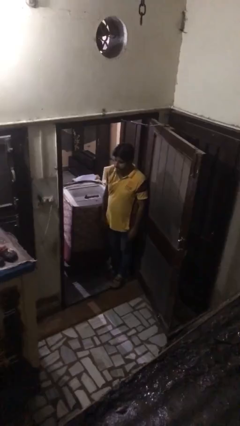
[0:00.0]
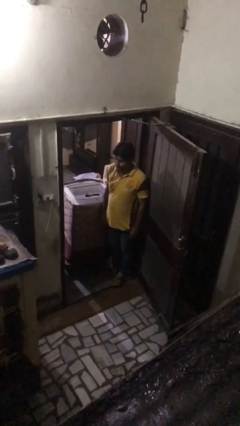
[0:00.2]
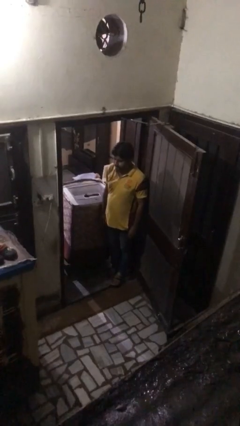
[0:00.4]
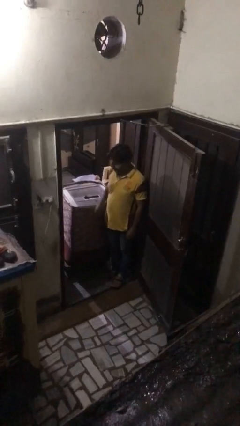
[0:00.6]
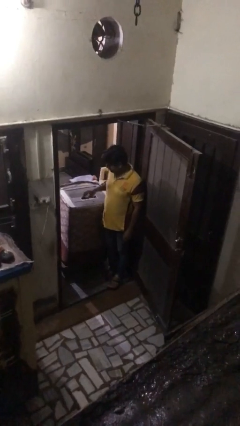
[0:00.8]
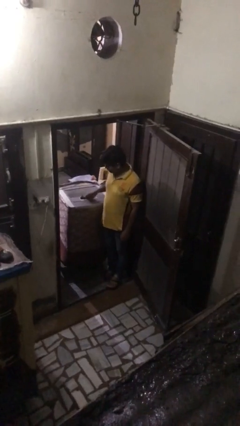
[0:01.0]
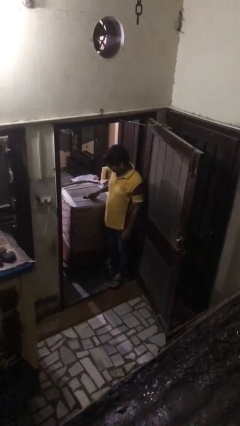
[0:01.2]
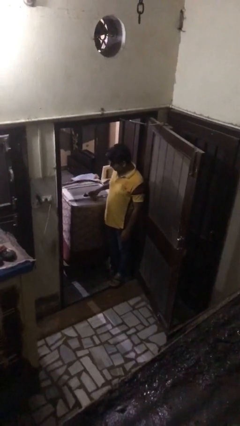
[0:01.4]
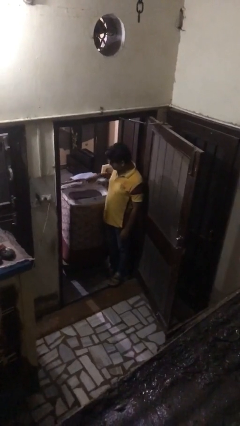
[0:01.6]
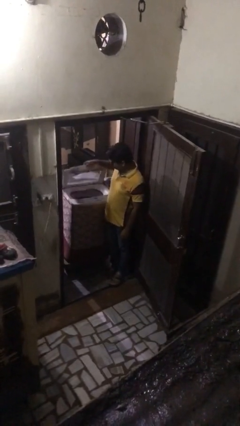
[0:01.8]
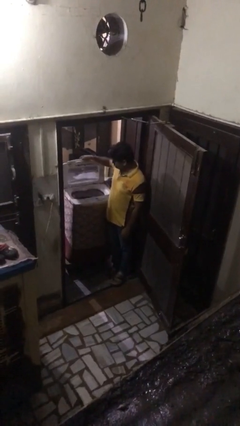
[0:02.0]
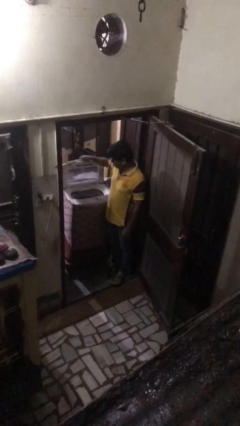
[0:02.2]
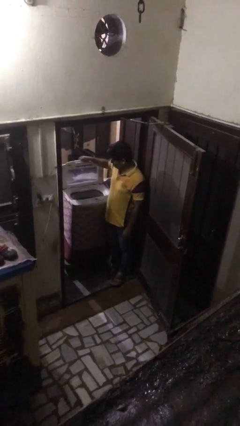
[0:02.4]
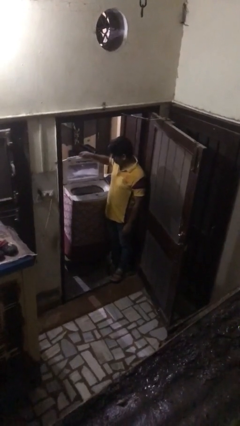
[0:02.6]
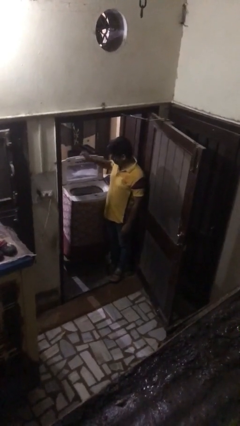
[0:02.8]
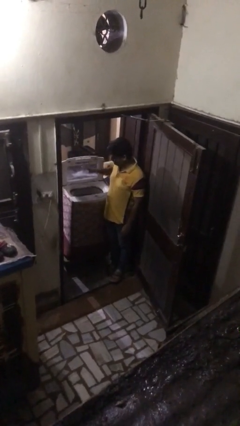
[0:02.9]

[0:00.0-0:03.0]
person opens clothes washer

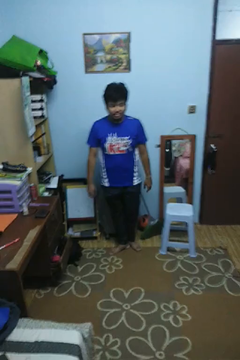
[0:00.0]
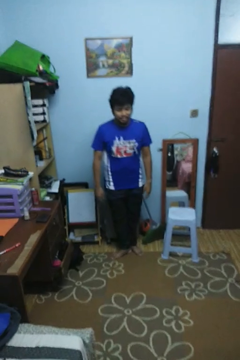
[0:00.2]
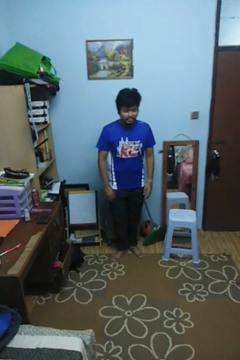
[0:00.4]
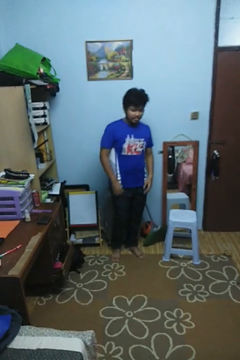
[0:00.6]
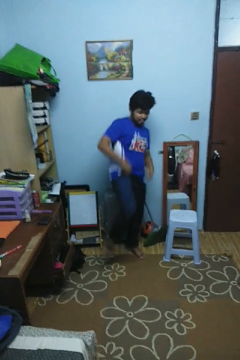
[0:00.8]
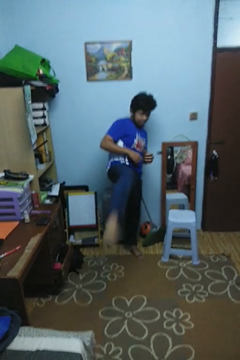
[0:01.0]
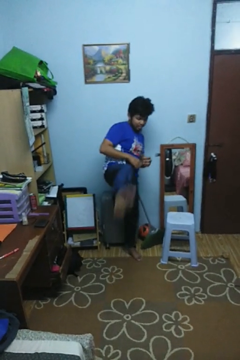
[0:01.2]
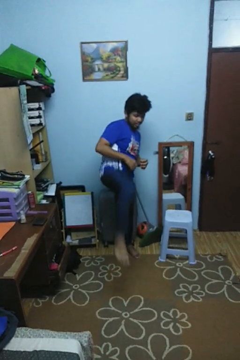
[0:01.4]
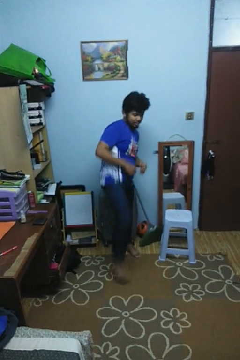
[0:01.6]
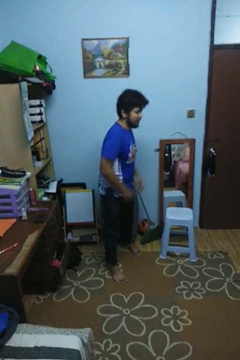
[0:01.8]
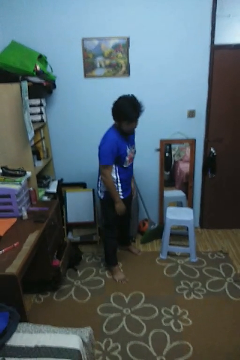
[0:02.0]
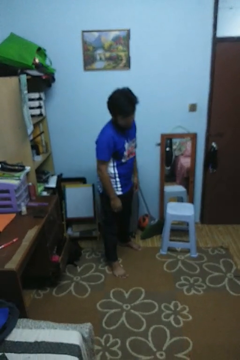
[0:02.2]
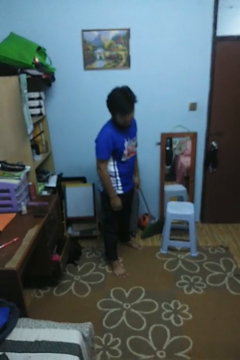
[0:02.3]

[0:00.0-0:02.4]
person karate kicks

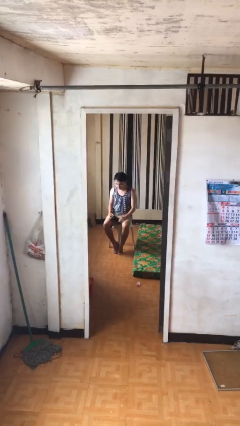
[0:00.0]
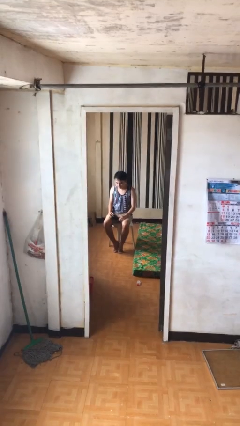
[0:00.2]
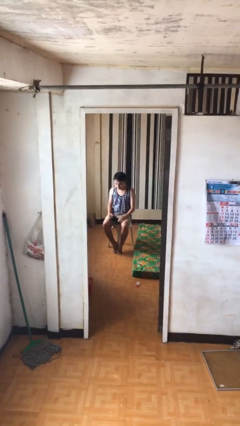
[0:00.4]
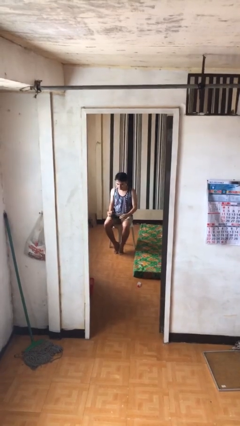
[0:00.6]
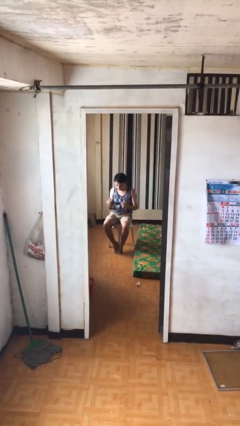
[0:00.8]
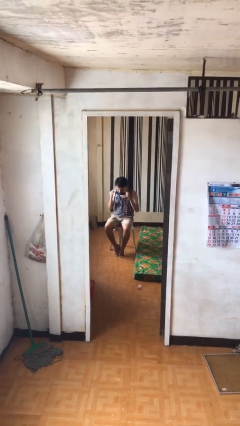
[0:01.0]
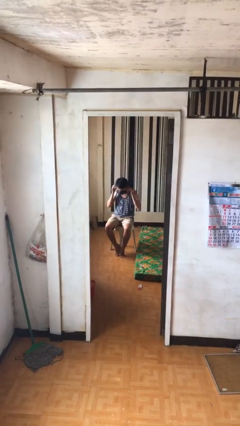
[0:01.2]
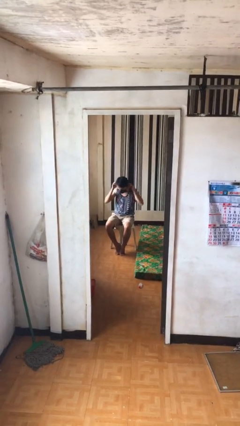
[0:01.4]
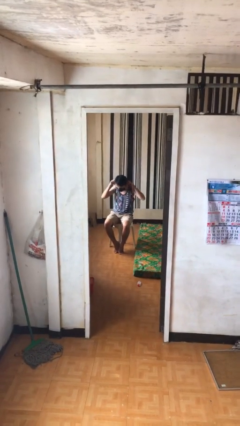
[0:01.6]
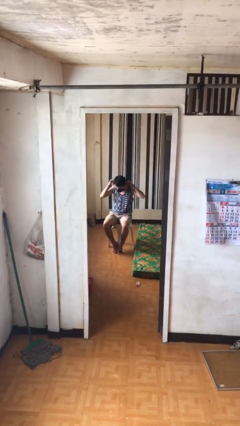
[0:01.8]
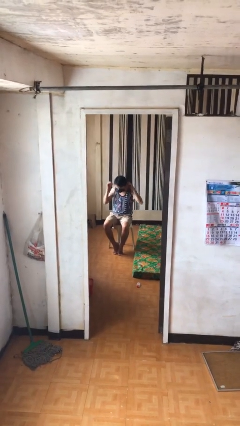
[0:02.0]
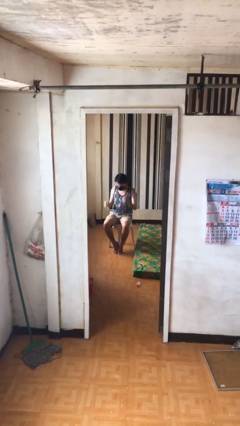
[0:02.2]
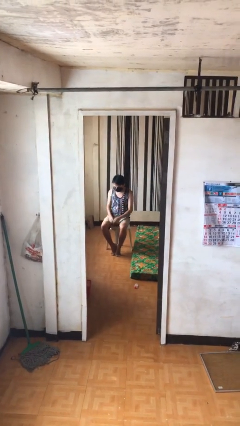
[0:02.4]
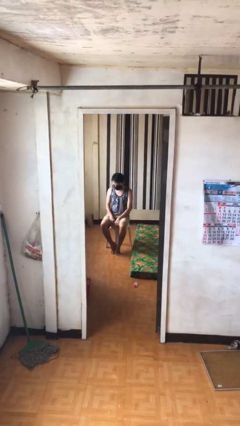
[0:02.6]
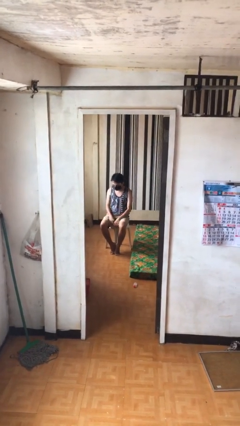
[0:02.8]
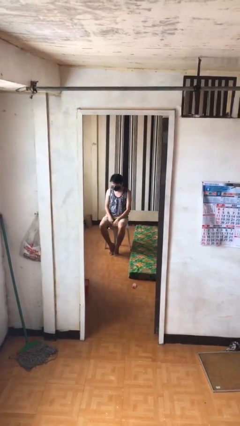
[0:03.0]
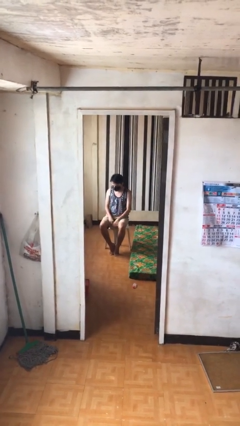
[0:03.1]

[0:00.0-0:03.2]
person puts on facemask

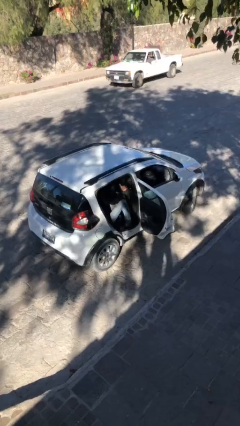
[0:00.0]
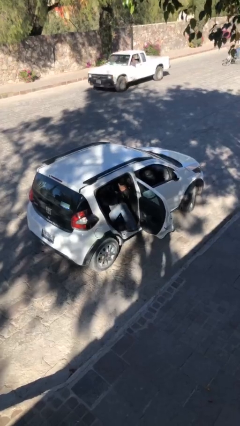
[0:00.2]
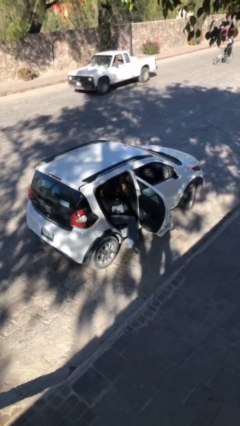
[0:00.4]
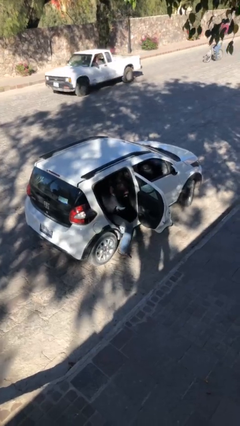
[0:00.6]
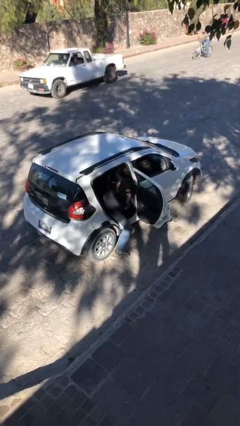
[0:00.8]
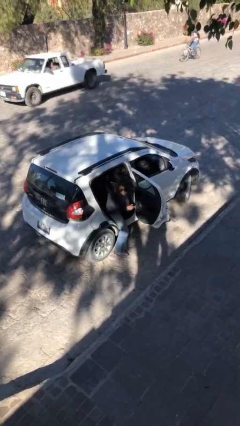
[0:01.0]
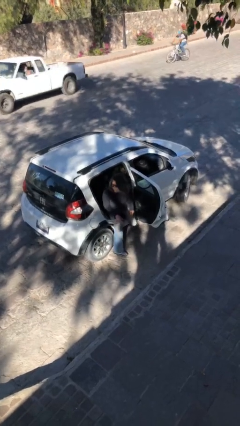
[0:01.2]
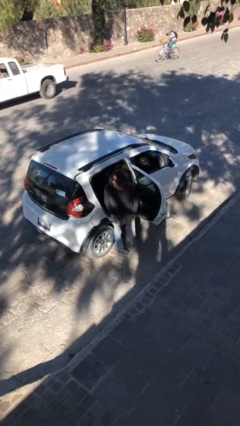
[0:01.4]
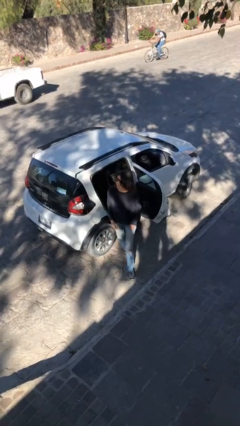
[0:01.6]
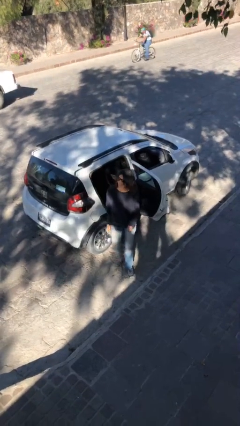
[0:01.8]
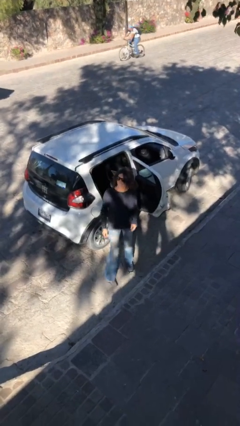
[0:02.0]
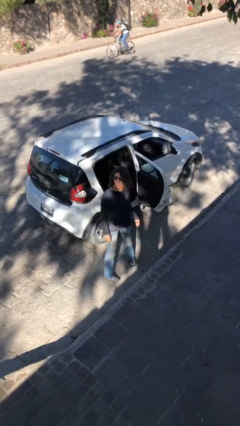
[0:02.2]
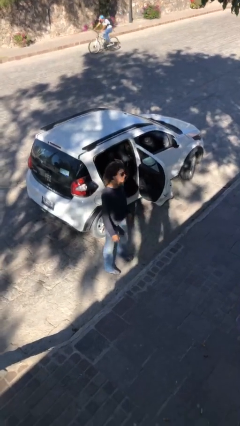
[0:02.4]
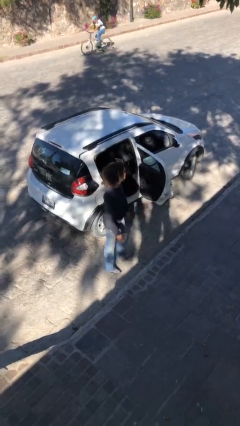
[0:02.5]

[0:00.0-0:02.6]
person exits car

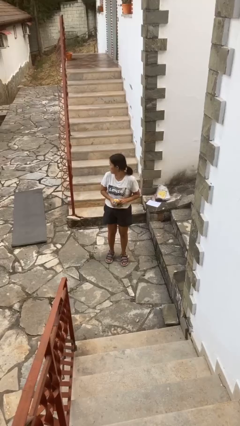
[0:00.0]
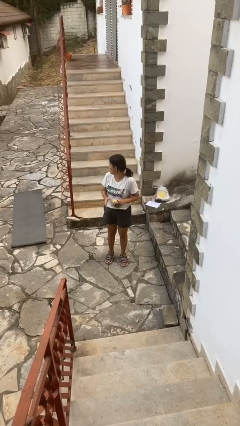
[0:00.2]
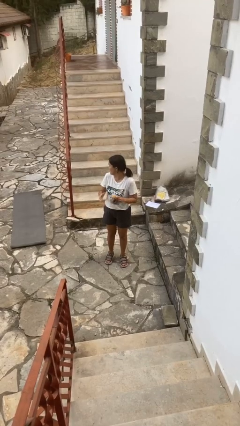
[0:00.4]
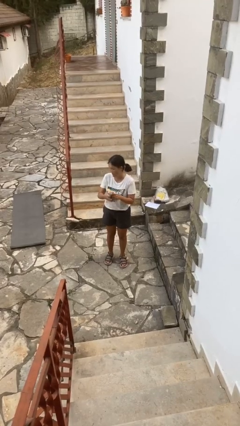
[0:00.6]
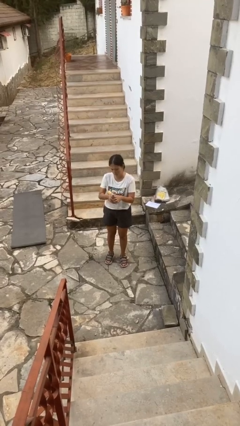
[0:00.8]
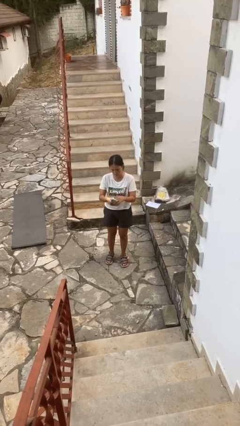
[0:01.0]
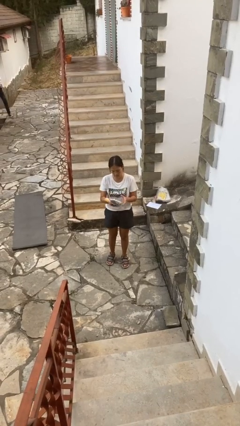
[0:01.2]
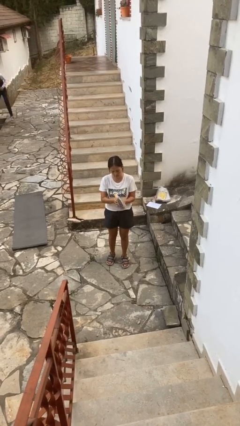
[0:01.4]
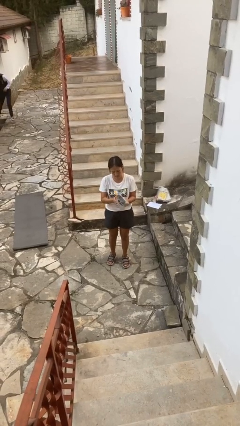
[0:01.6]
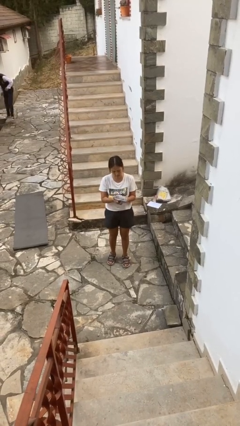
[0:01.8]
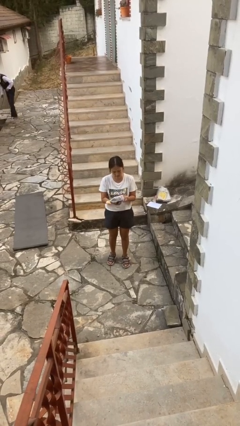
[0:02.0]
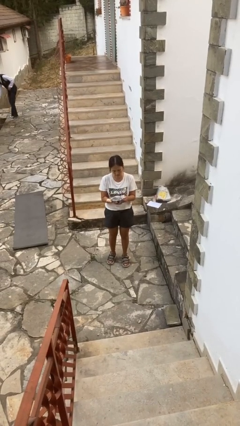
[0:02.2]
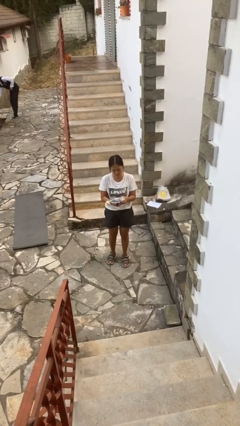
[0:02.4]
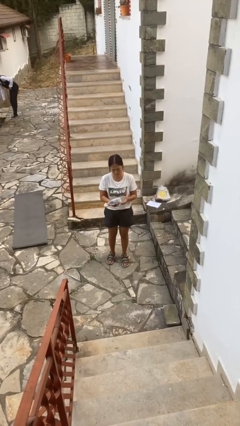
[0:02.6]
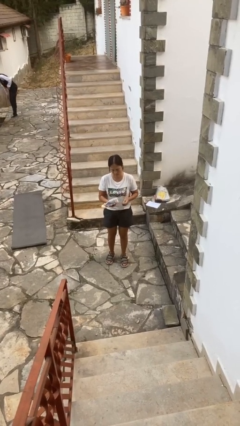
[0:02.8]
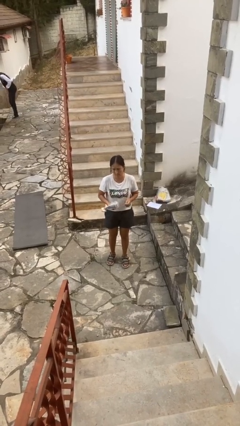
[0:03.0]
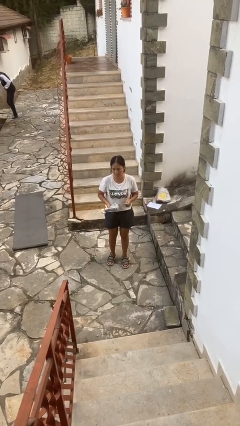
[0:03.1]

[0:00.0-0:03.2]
person squeezes object

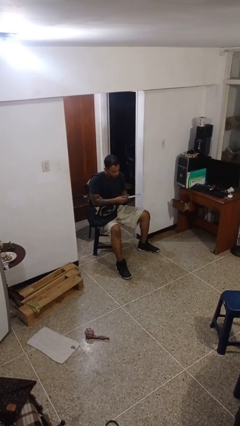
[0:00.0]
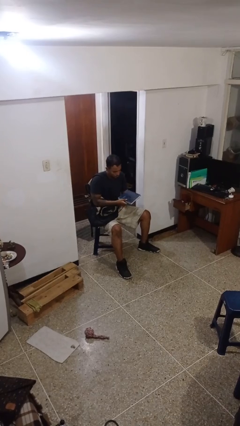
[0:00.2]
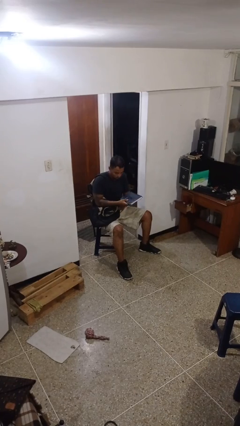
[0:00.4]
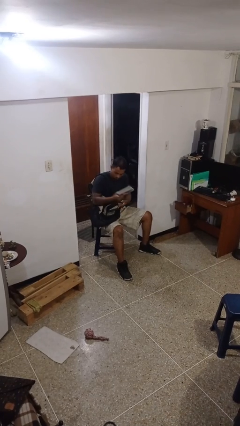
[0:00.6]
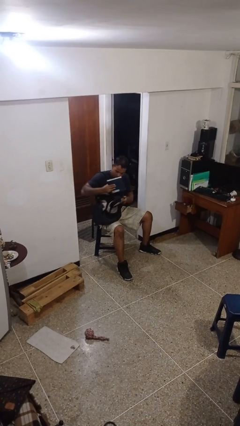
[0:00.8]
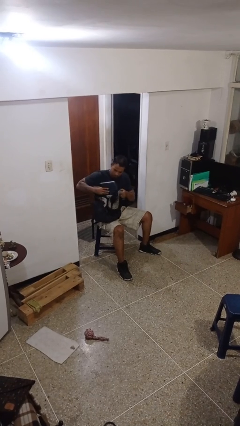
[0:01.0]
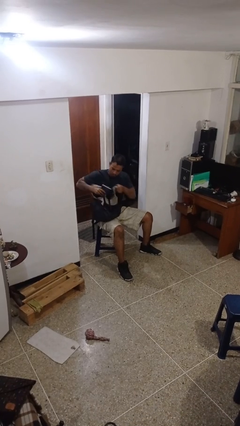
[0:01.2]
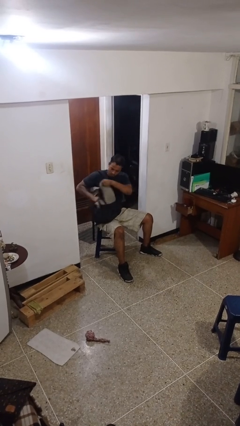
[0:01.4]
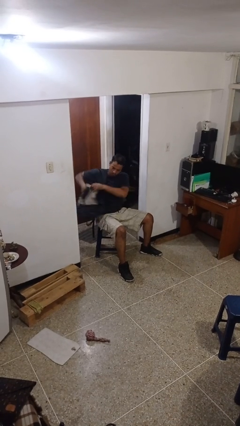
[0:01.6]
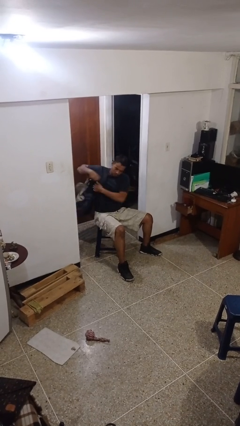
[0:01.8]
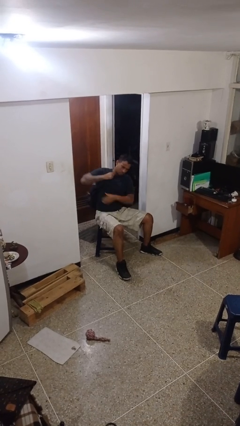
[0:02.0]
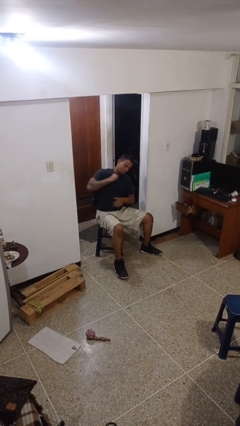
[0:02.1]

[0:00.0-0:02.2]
person puts object into backpack

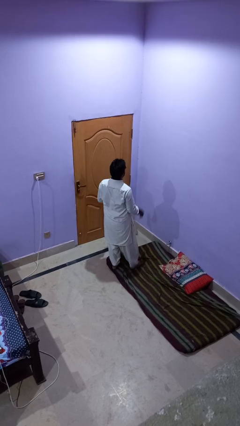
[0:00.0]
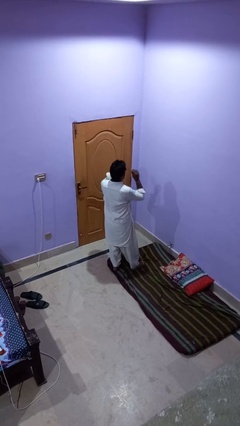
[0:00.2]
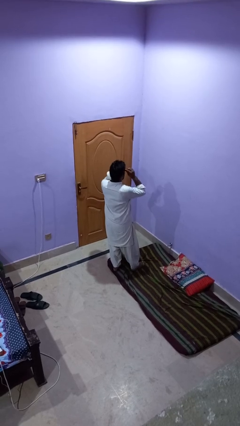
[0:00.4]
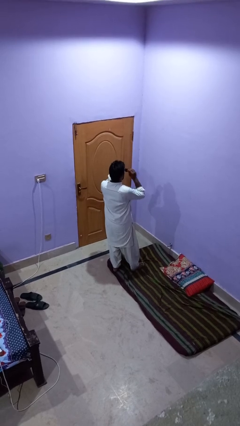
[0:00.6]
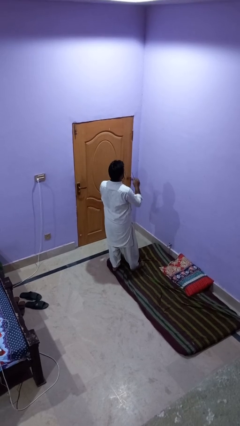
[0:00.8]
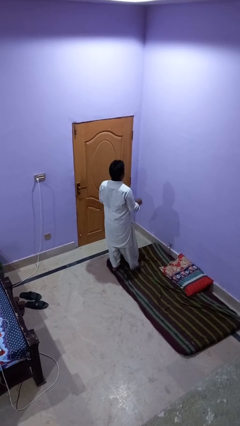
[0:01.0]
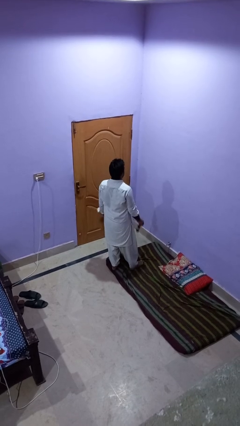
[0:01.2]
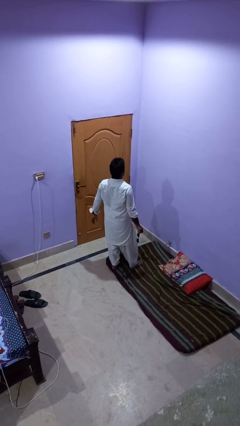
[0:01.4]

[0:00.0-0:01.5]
person takes off sunglasses
